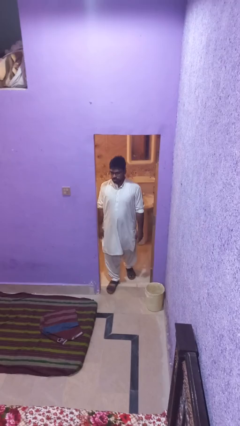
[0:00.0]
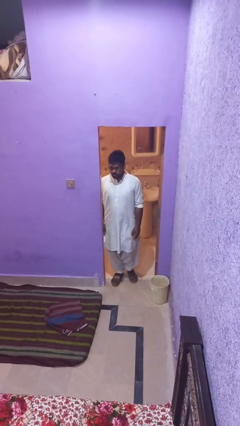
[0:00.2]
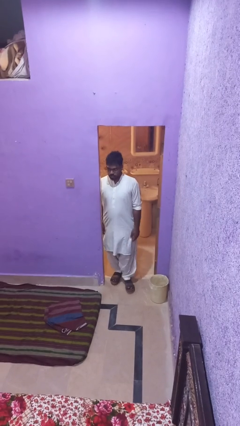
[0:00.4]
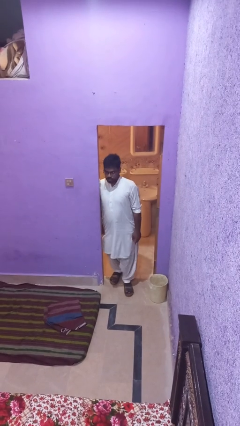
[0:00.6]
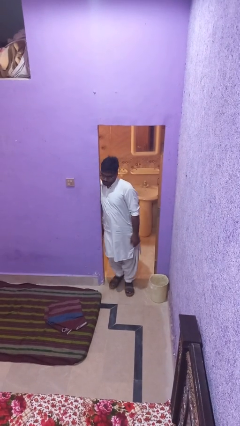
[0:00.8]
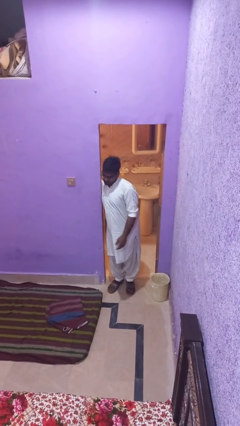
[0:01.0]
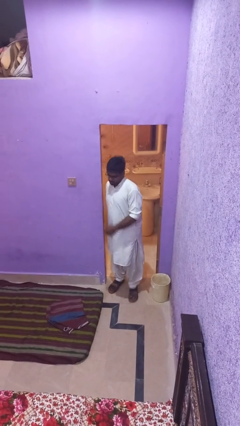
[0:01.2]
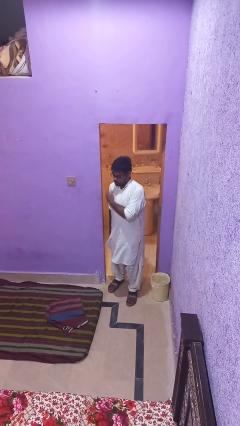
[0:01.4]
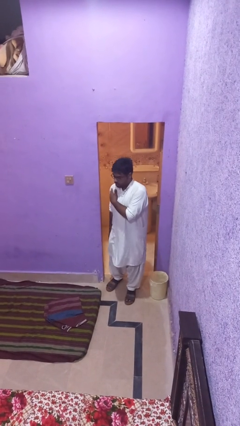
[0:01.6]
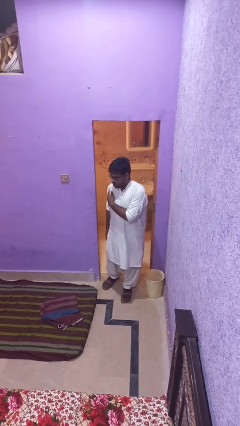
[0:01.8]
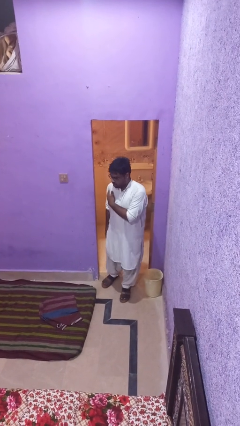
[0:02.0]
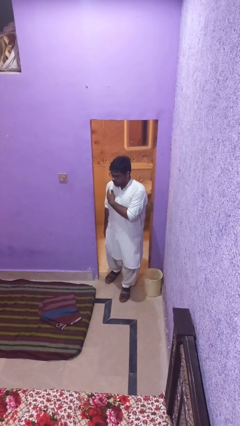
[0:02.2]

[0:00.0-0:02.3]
person bumps into wall

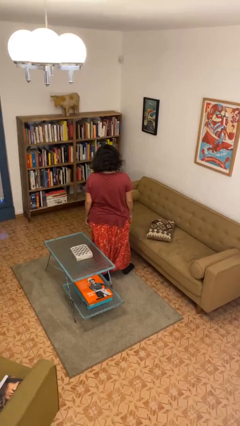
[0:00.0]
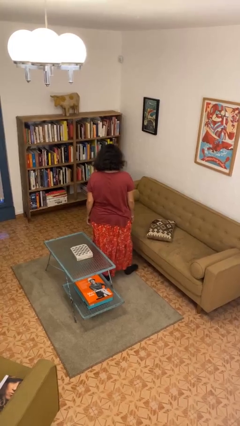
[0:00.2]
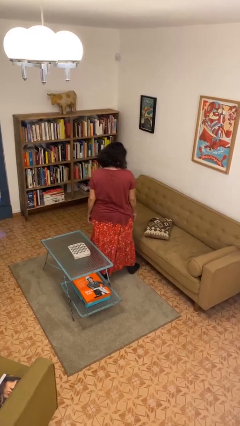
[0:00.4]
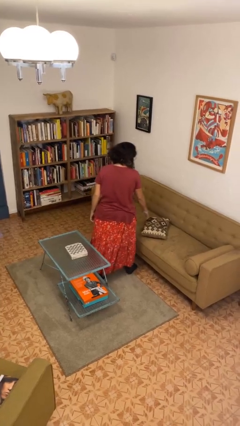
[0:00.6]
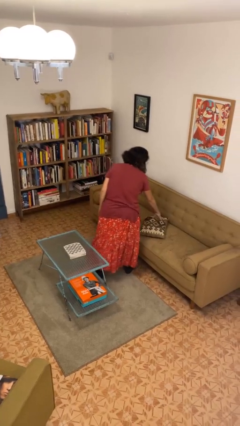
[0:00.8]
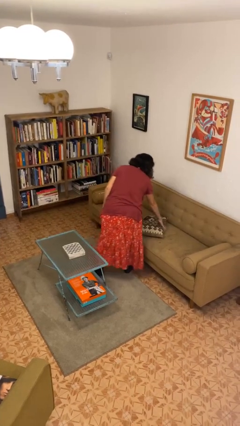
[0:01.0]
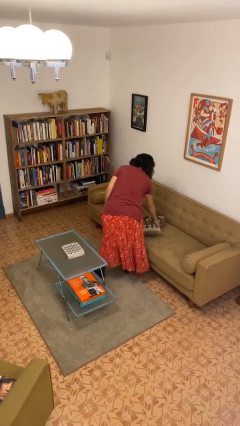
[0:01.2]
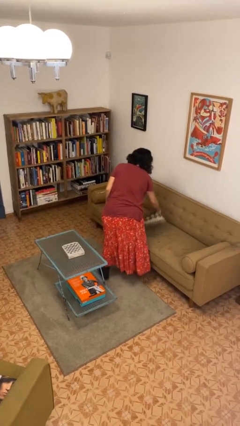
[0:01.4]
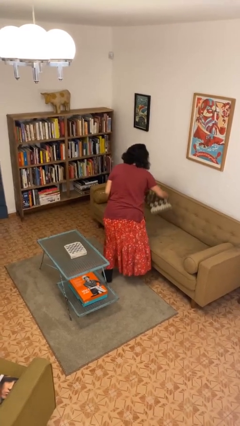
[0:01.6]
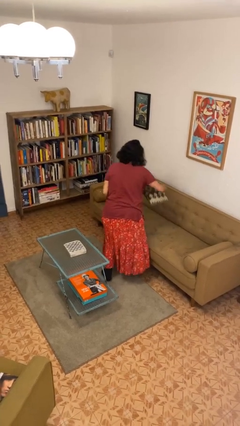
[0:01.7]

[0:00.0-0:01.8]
person picks up object from couch

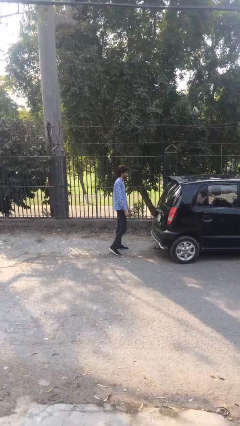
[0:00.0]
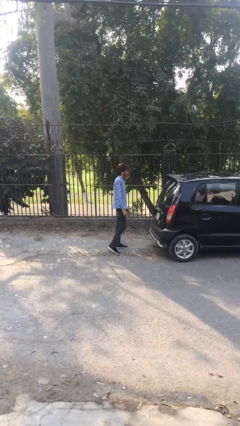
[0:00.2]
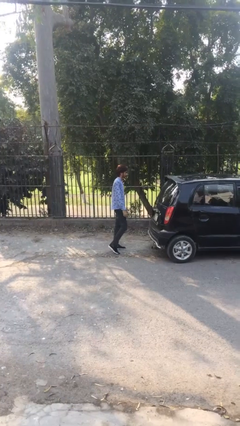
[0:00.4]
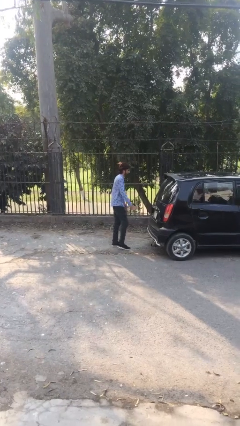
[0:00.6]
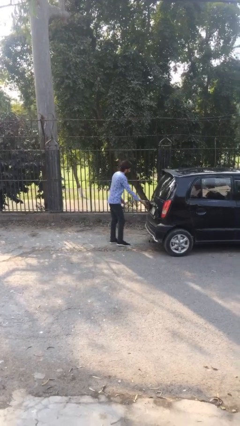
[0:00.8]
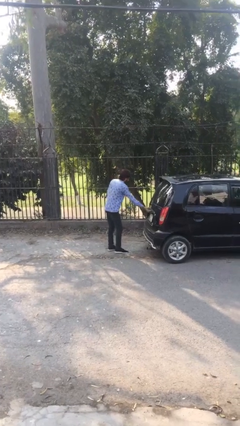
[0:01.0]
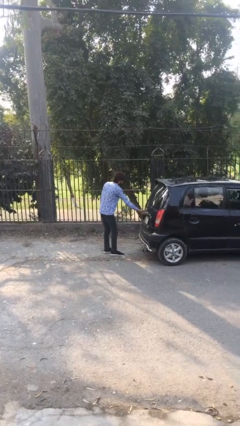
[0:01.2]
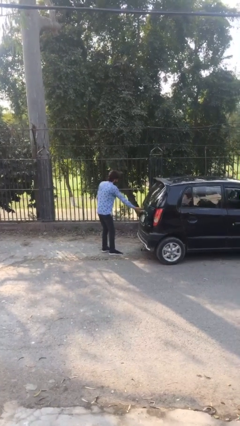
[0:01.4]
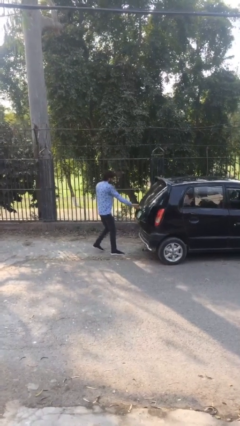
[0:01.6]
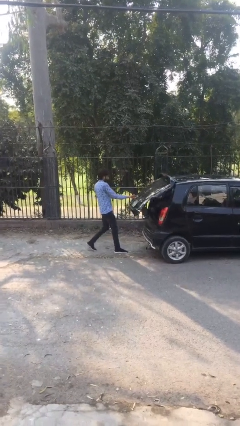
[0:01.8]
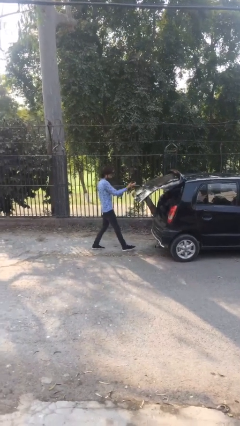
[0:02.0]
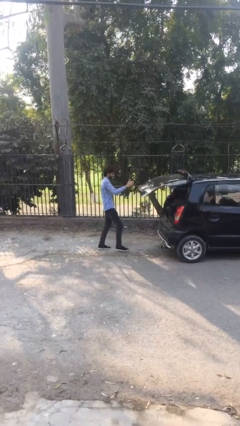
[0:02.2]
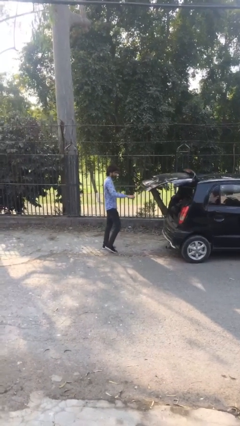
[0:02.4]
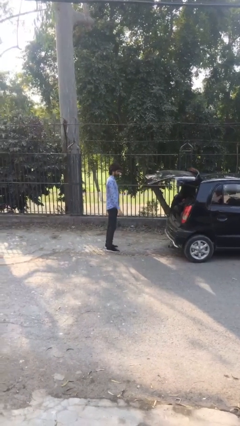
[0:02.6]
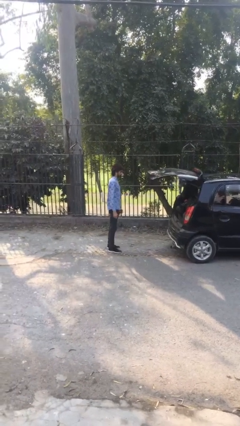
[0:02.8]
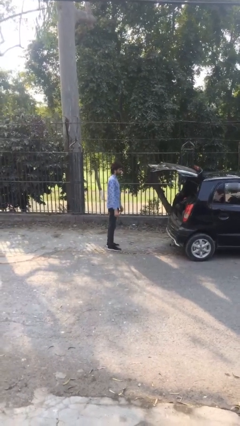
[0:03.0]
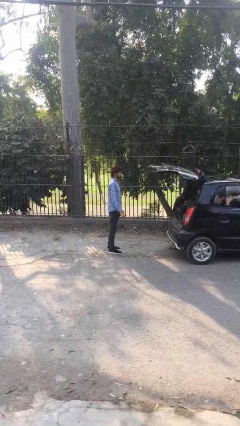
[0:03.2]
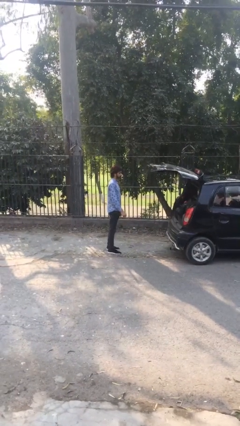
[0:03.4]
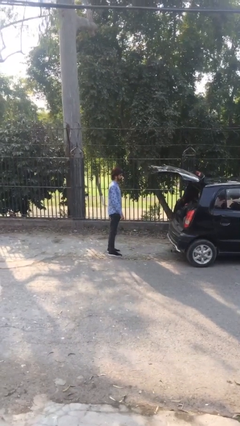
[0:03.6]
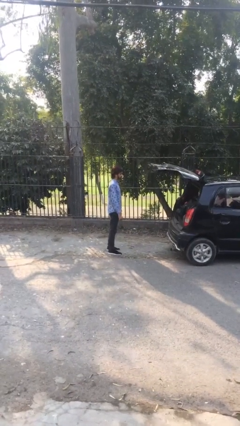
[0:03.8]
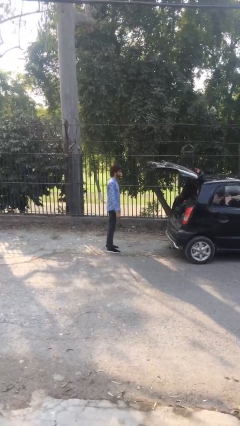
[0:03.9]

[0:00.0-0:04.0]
person opens car trunk

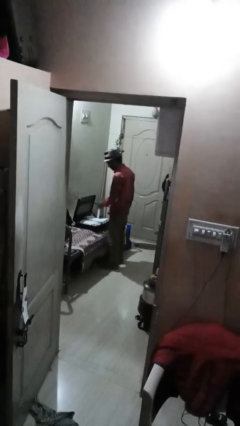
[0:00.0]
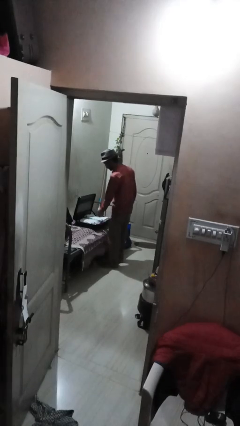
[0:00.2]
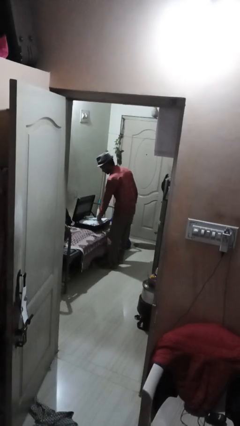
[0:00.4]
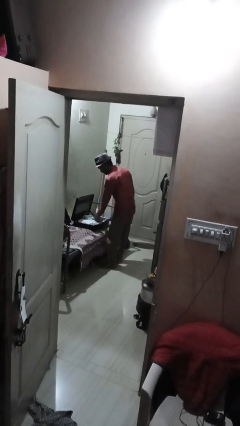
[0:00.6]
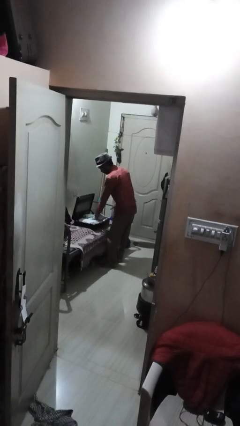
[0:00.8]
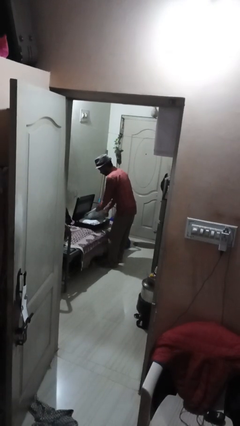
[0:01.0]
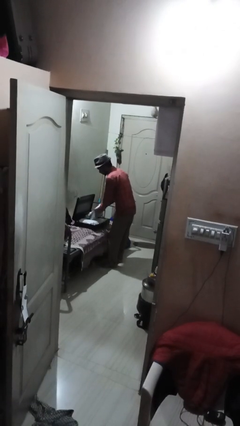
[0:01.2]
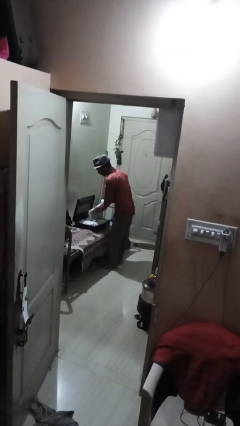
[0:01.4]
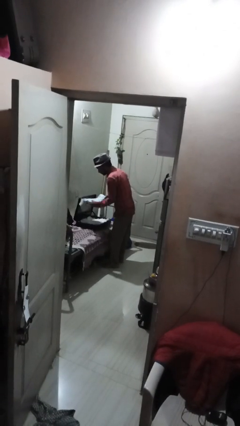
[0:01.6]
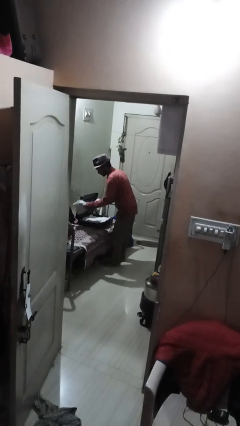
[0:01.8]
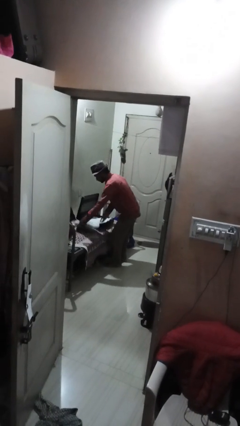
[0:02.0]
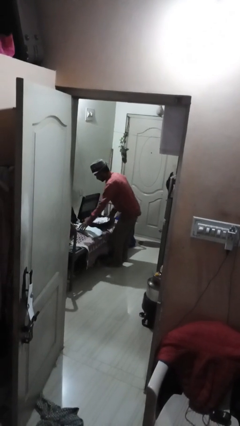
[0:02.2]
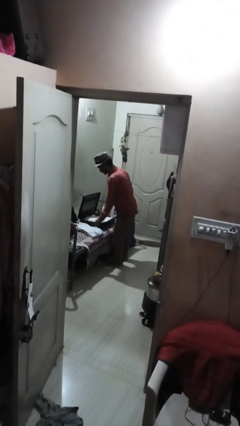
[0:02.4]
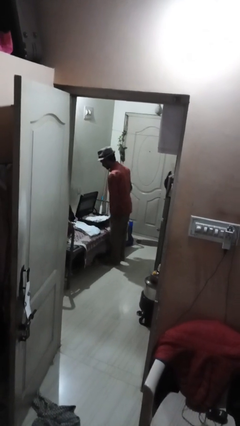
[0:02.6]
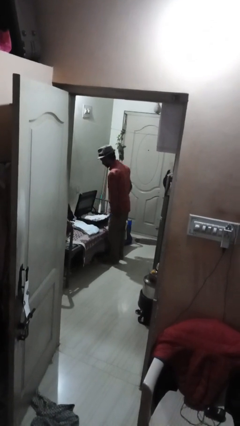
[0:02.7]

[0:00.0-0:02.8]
person unloads clothes from suitcase

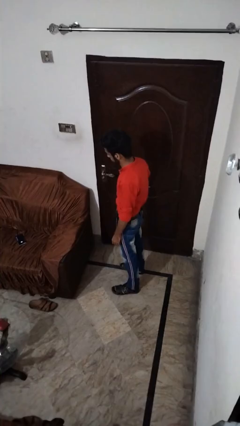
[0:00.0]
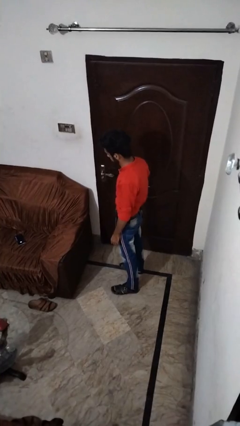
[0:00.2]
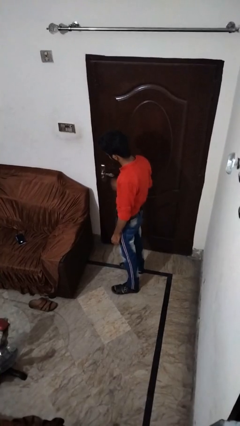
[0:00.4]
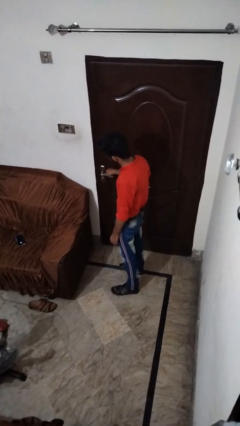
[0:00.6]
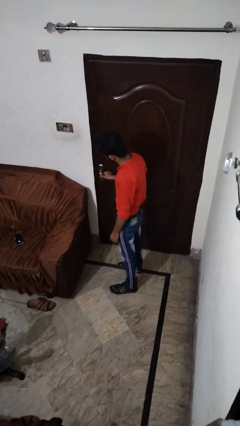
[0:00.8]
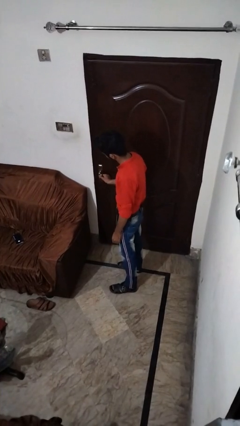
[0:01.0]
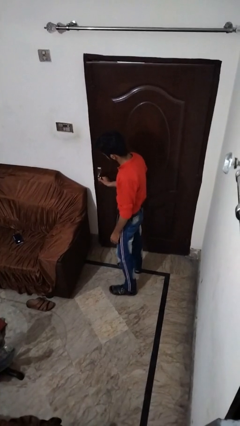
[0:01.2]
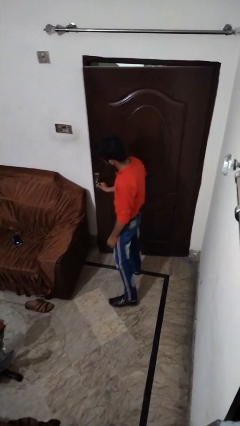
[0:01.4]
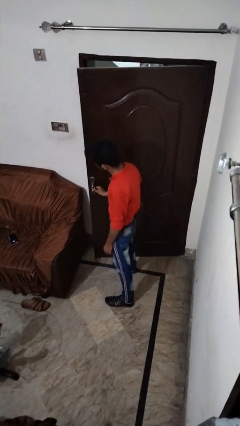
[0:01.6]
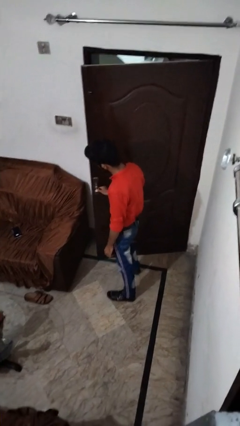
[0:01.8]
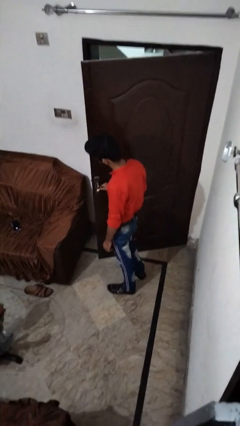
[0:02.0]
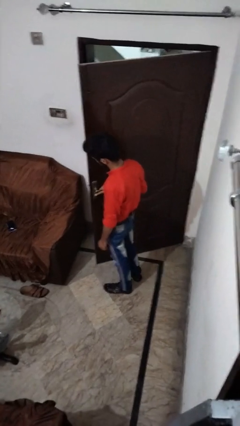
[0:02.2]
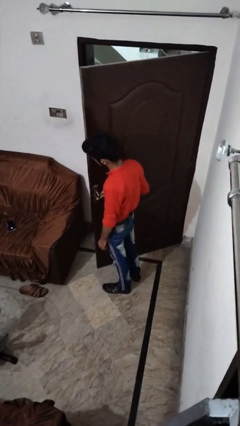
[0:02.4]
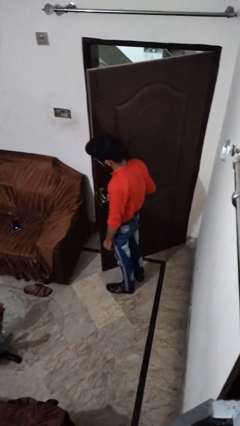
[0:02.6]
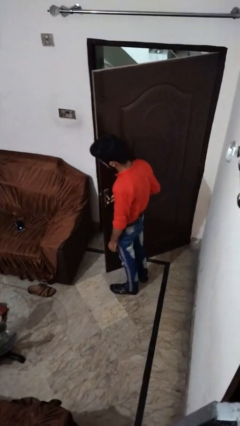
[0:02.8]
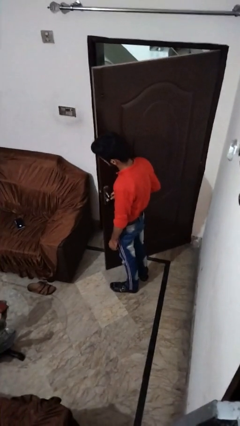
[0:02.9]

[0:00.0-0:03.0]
person opens facility door

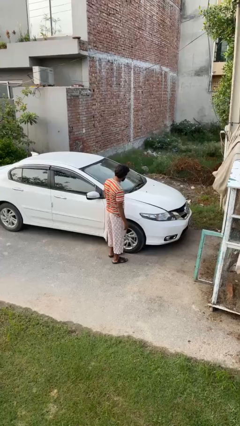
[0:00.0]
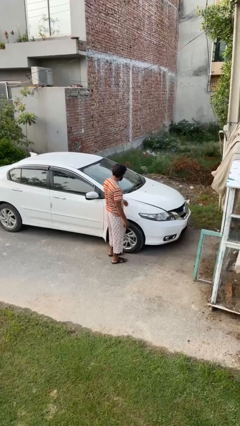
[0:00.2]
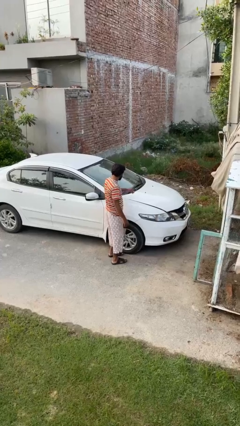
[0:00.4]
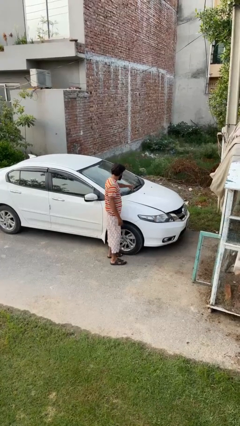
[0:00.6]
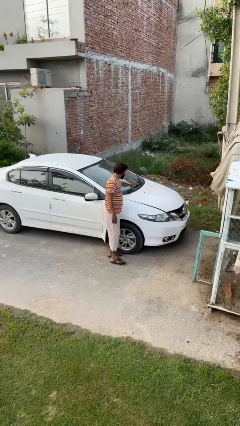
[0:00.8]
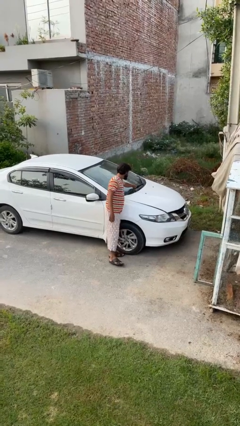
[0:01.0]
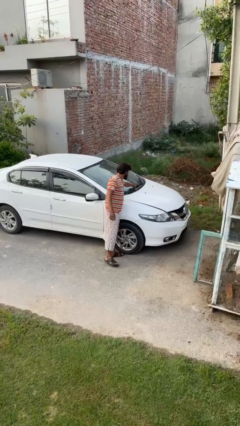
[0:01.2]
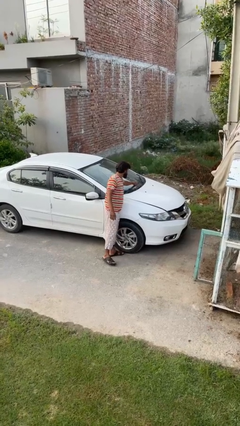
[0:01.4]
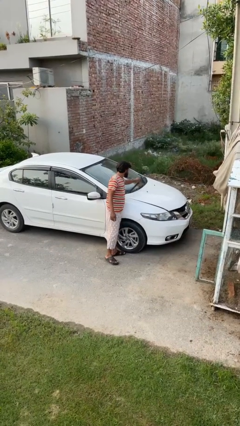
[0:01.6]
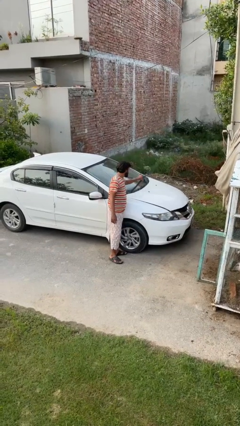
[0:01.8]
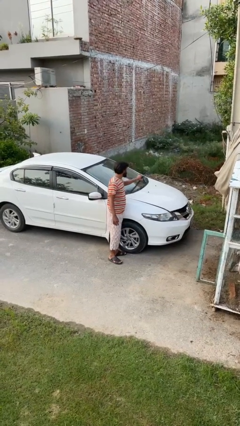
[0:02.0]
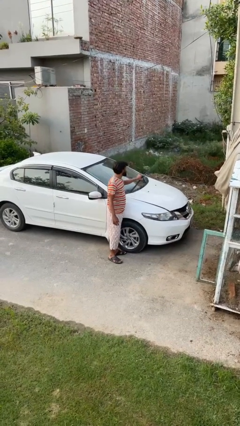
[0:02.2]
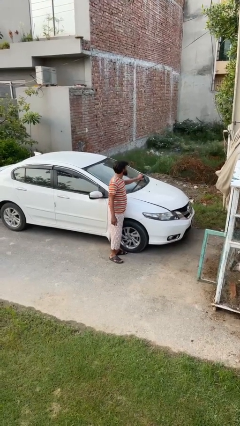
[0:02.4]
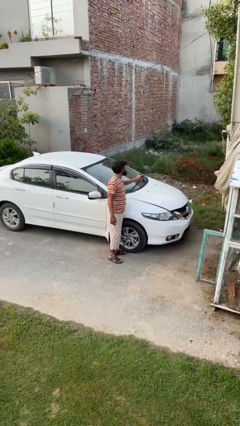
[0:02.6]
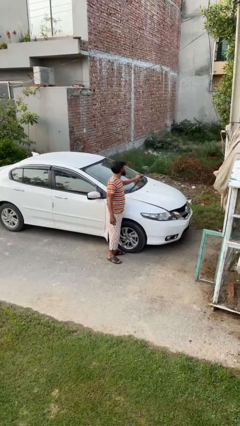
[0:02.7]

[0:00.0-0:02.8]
person flips up car wipers

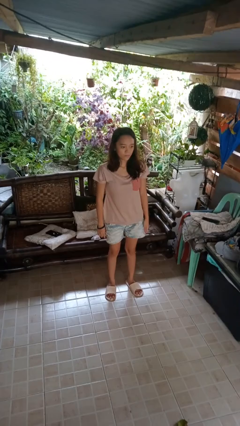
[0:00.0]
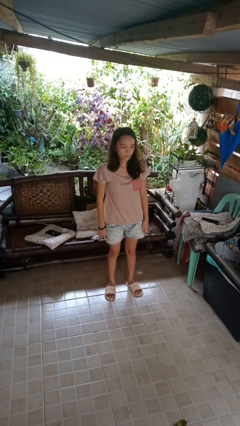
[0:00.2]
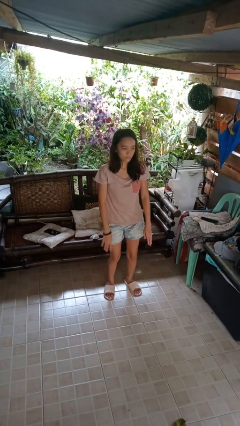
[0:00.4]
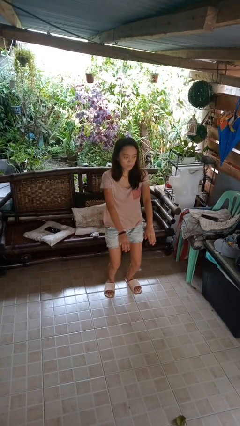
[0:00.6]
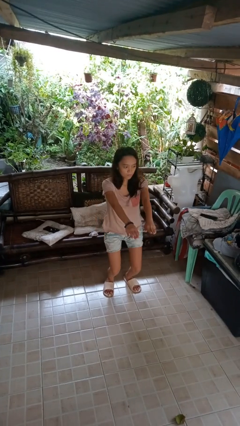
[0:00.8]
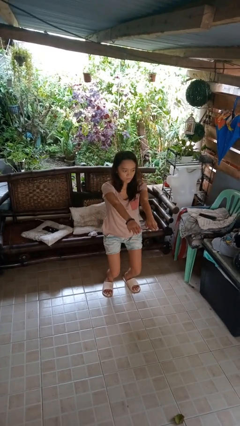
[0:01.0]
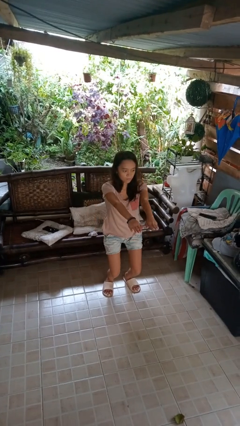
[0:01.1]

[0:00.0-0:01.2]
person squats
